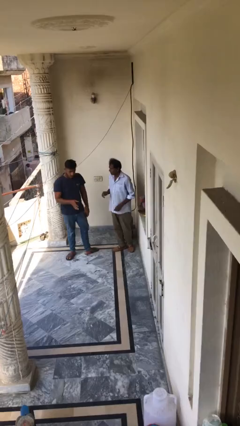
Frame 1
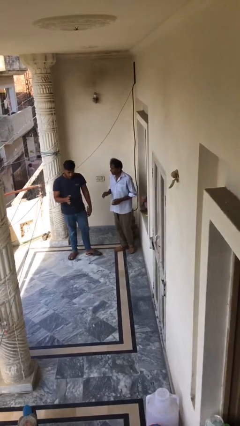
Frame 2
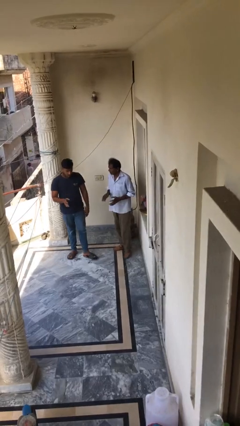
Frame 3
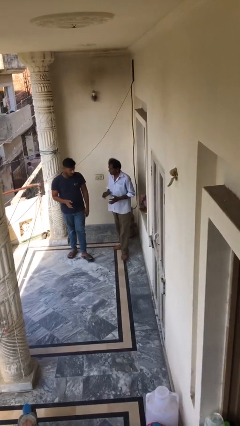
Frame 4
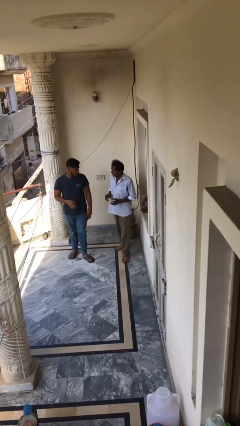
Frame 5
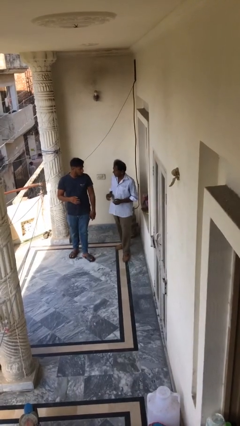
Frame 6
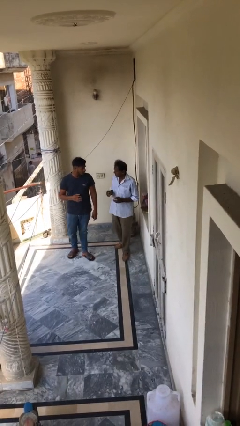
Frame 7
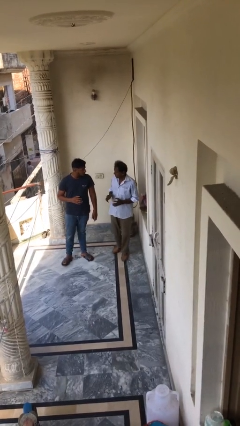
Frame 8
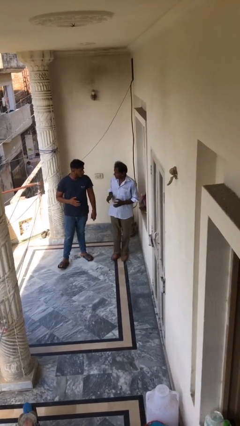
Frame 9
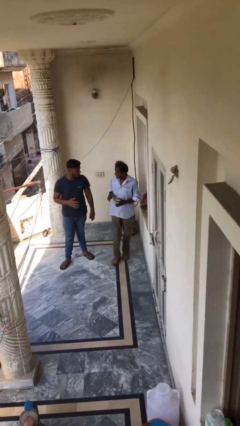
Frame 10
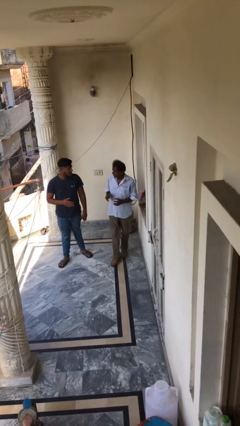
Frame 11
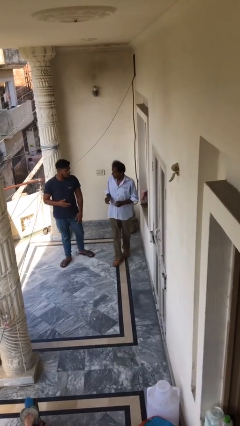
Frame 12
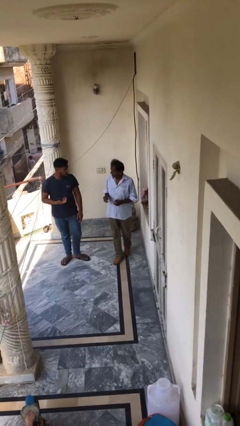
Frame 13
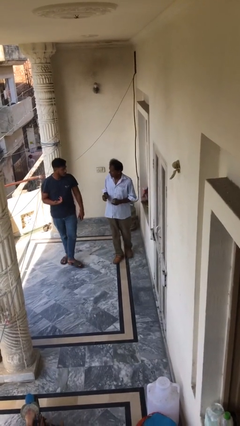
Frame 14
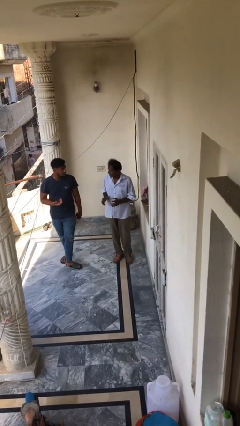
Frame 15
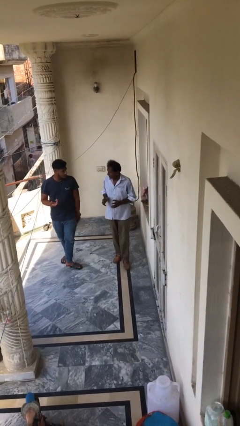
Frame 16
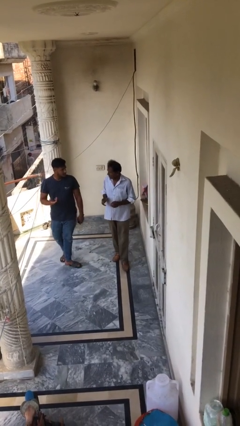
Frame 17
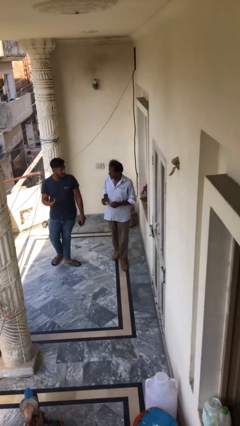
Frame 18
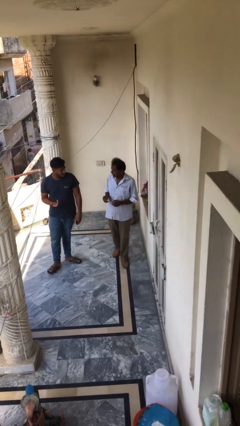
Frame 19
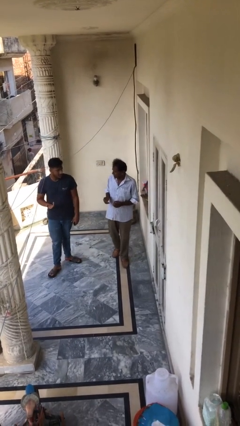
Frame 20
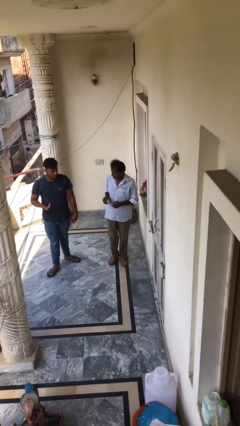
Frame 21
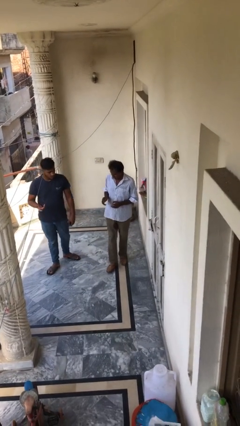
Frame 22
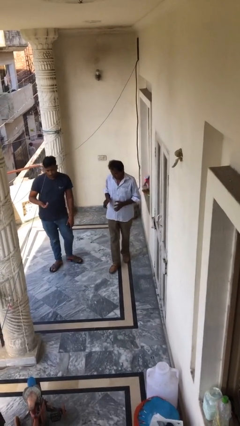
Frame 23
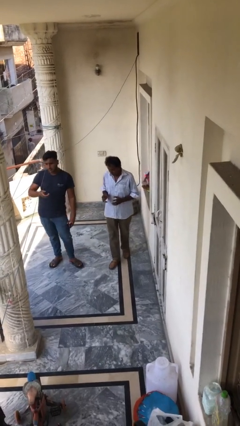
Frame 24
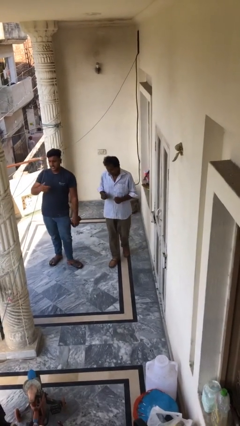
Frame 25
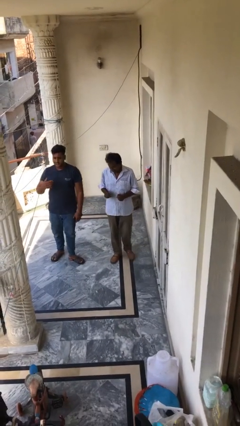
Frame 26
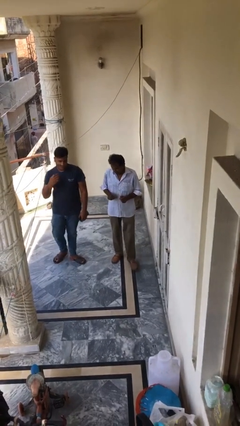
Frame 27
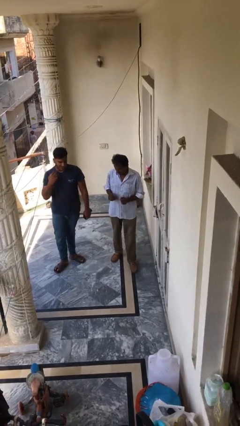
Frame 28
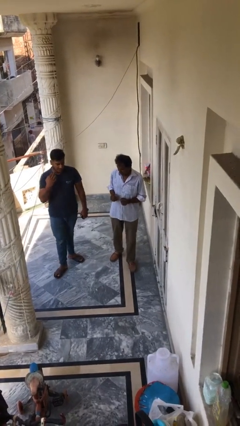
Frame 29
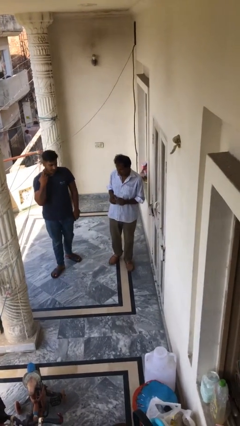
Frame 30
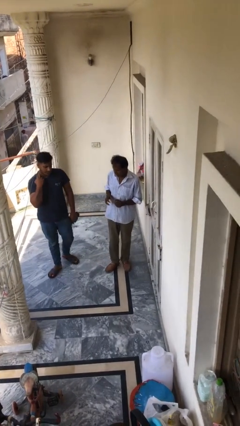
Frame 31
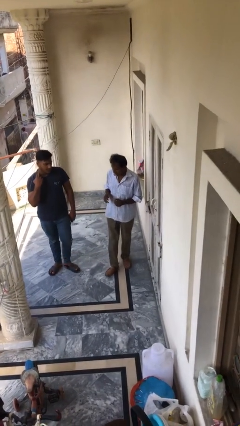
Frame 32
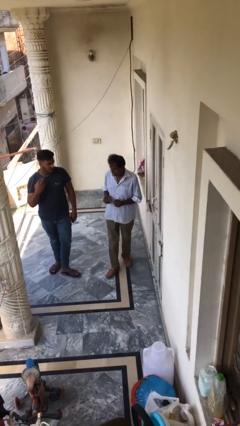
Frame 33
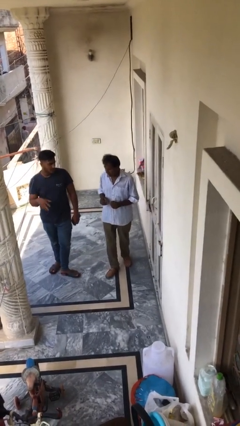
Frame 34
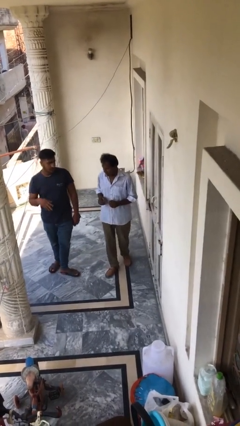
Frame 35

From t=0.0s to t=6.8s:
person talks to person

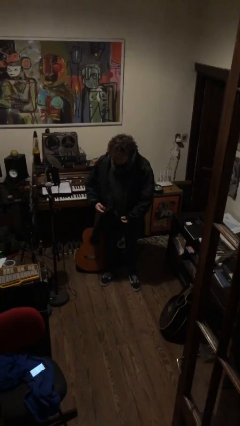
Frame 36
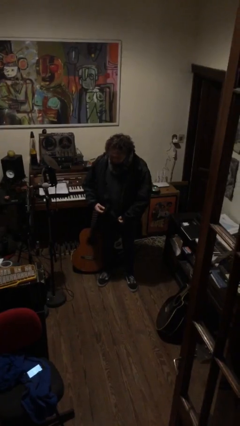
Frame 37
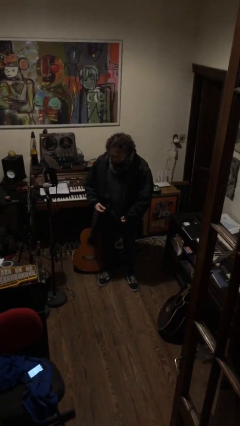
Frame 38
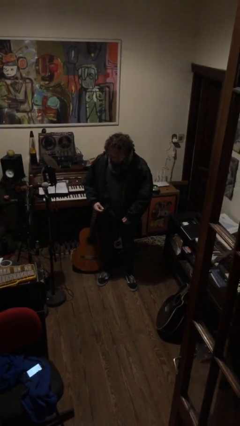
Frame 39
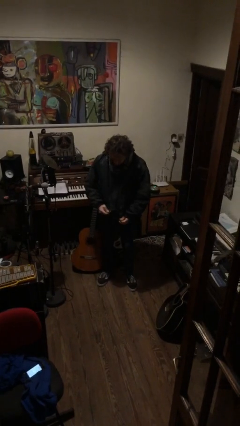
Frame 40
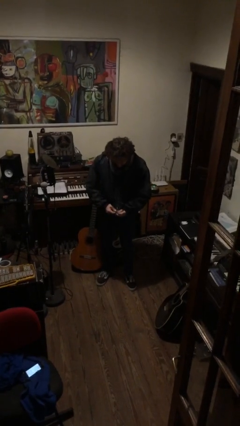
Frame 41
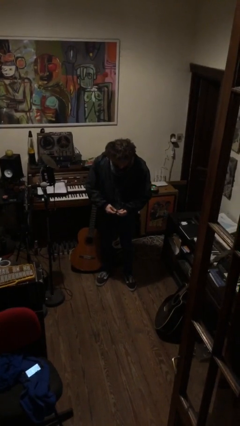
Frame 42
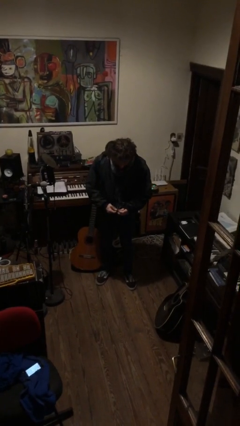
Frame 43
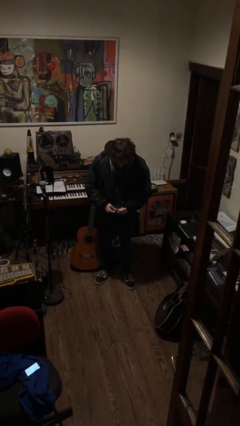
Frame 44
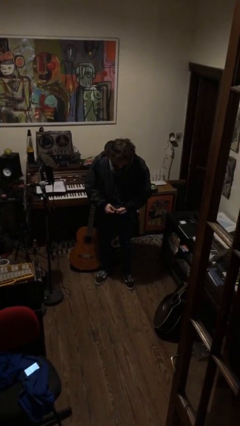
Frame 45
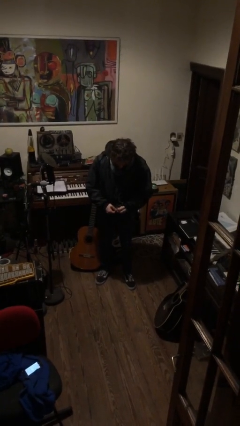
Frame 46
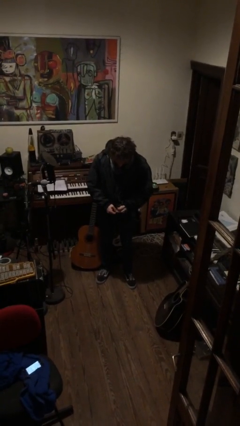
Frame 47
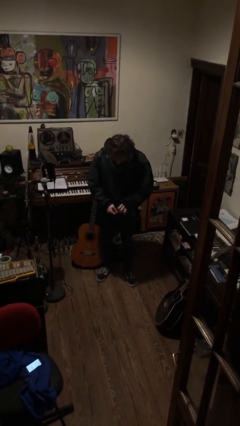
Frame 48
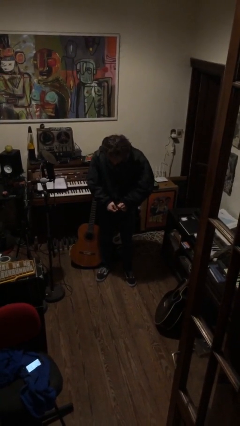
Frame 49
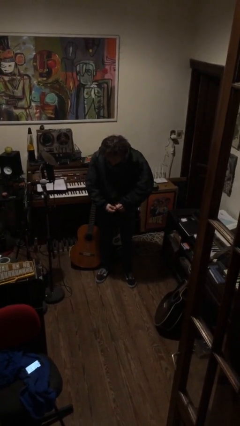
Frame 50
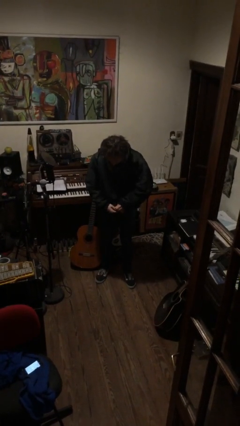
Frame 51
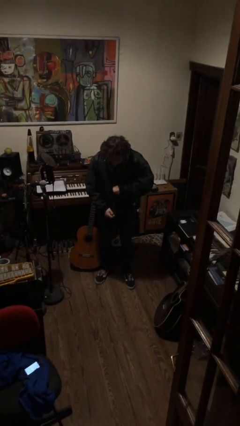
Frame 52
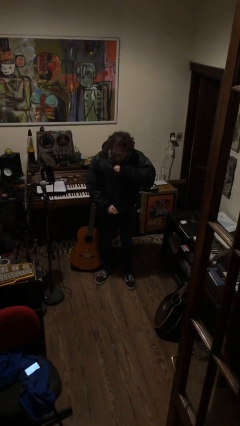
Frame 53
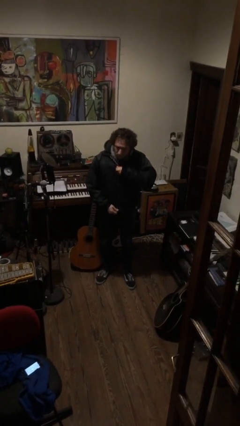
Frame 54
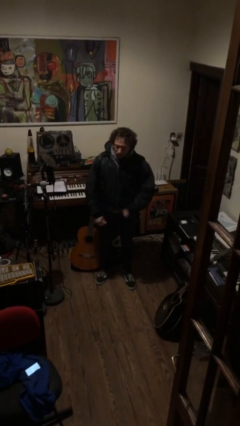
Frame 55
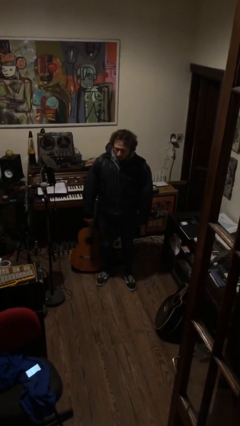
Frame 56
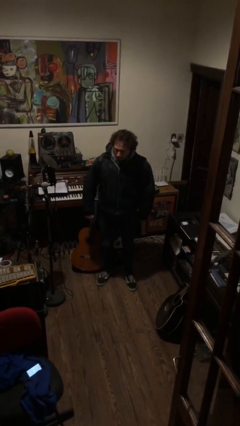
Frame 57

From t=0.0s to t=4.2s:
person zips up jacket

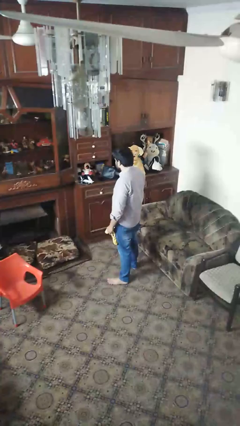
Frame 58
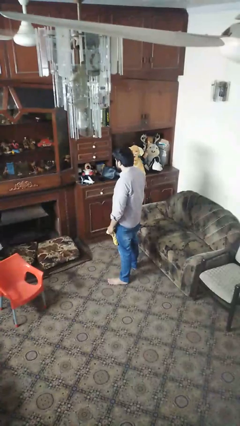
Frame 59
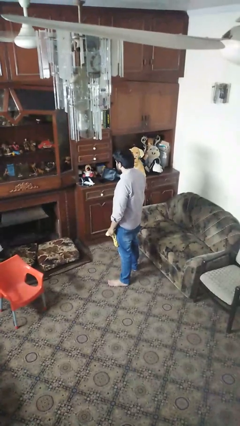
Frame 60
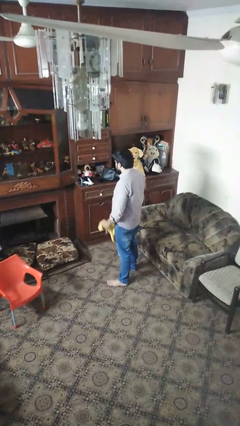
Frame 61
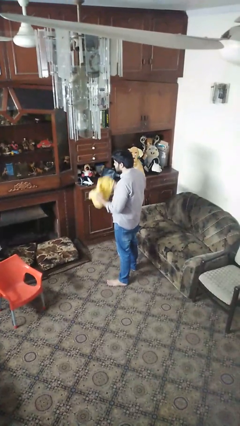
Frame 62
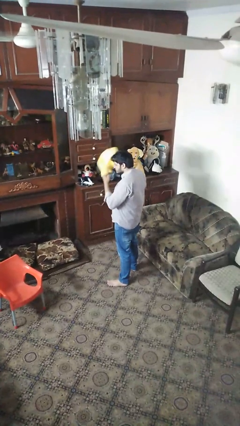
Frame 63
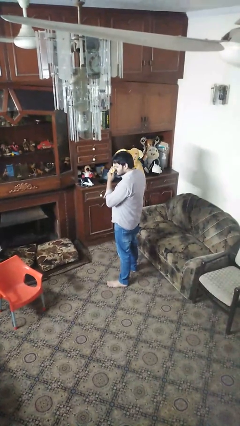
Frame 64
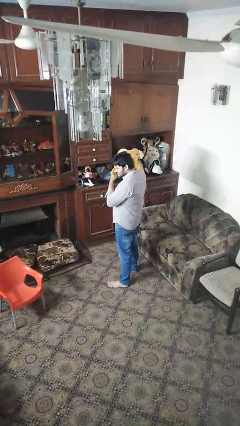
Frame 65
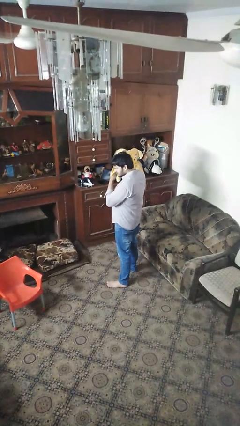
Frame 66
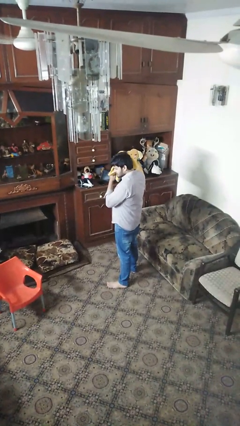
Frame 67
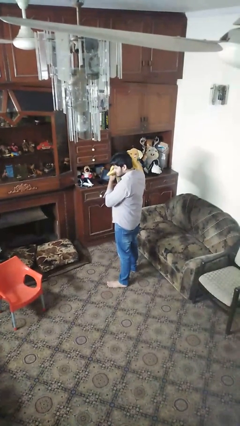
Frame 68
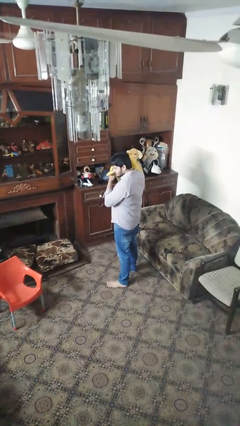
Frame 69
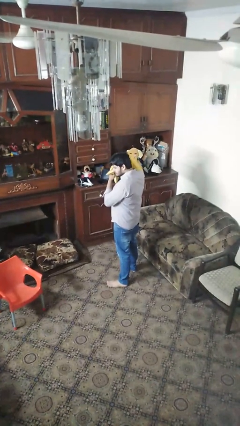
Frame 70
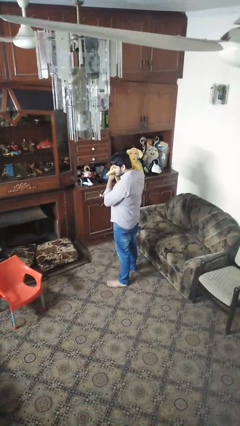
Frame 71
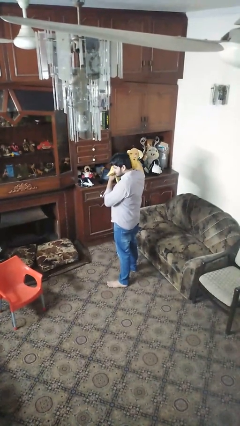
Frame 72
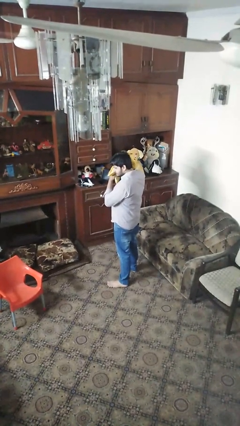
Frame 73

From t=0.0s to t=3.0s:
person dries hair with towel

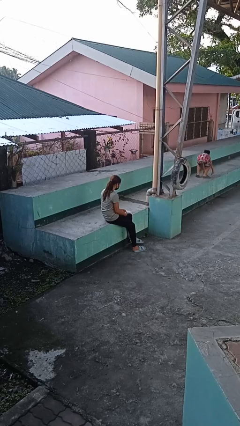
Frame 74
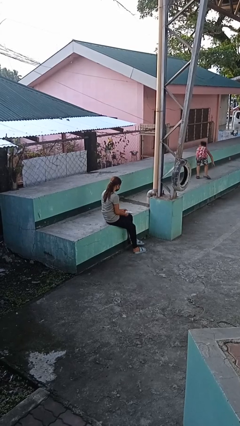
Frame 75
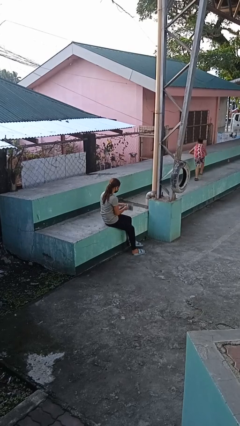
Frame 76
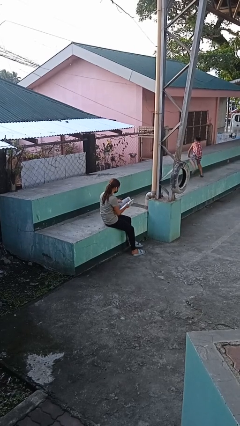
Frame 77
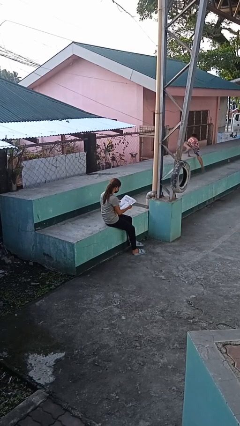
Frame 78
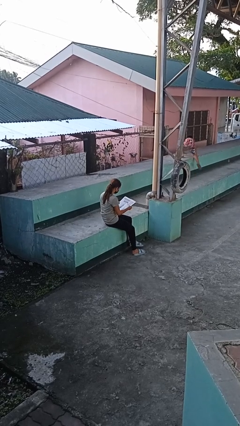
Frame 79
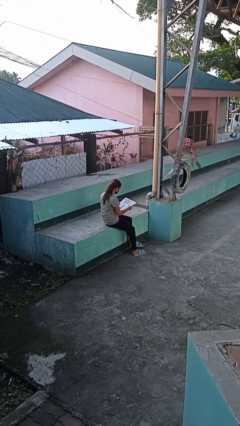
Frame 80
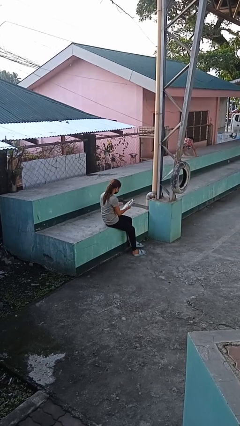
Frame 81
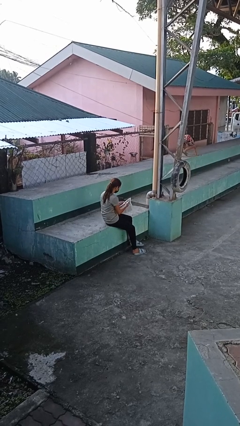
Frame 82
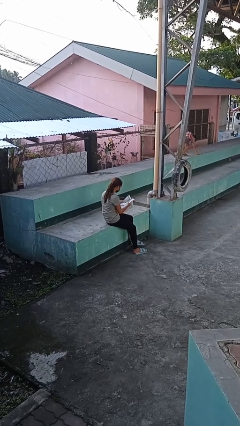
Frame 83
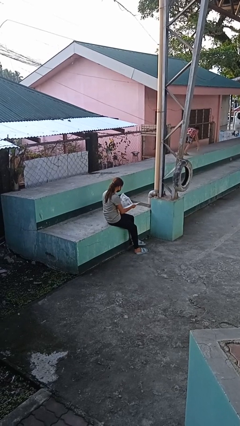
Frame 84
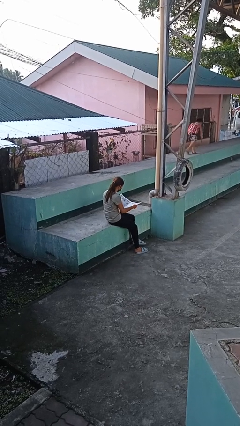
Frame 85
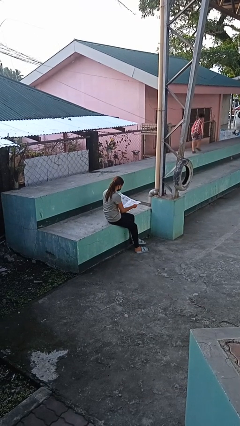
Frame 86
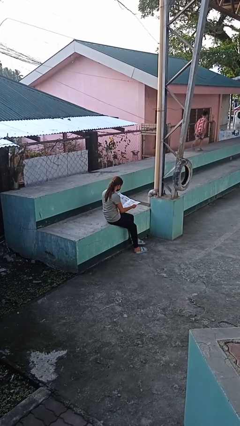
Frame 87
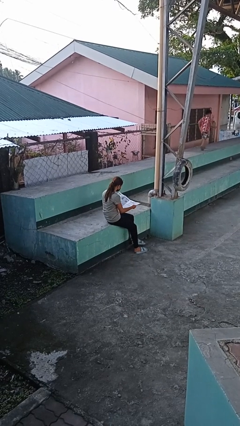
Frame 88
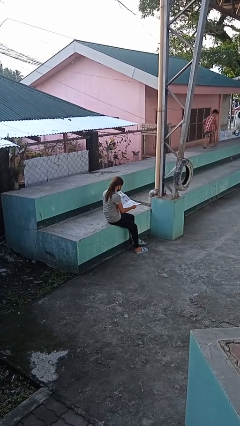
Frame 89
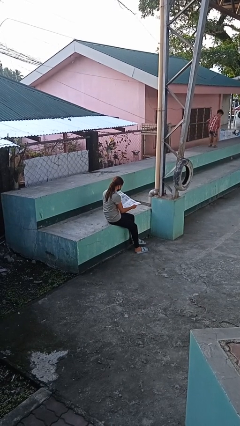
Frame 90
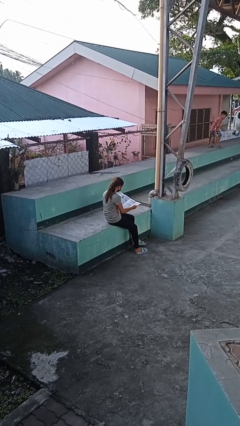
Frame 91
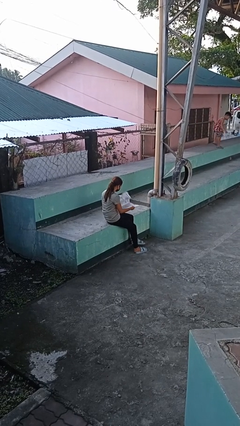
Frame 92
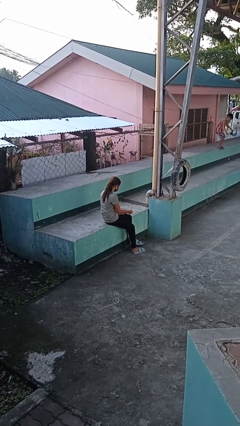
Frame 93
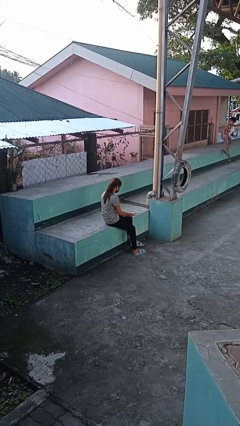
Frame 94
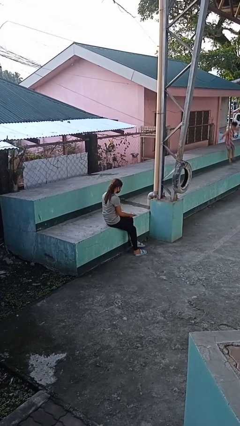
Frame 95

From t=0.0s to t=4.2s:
person reads newspaper
